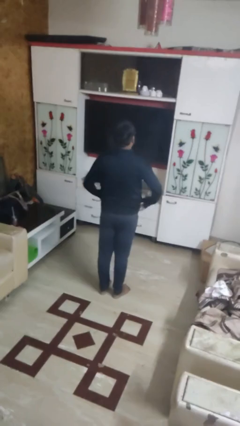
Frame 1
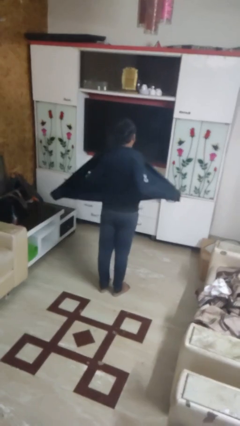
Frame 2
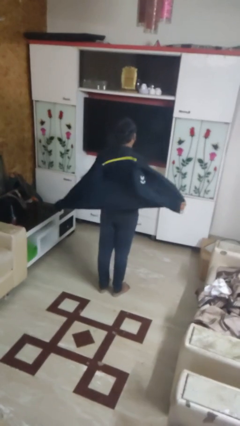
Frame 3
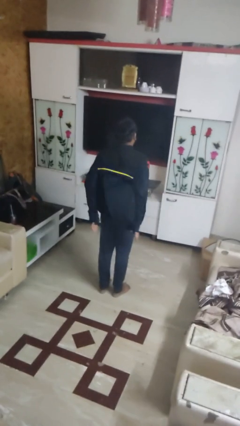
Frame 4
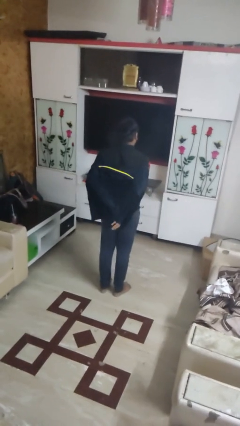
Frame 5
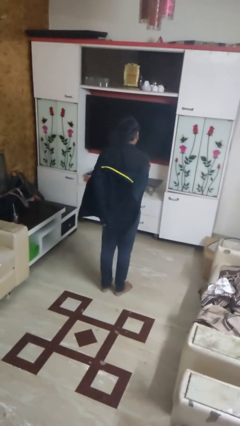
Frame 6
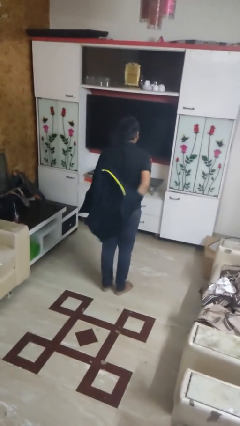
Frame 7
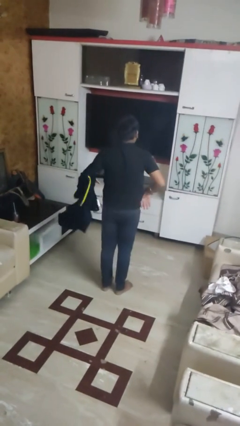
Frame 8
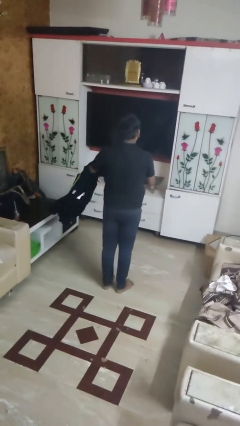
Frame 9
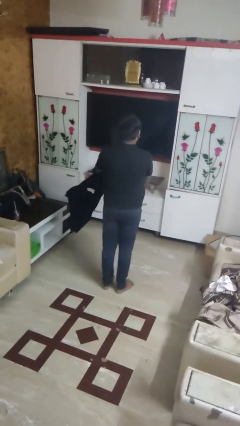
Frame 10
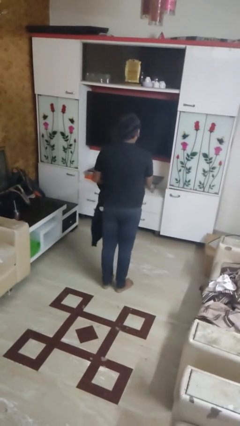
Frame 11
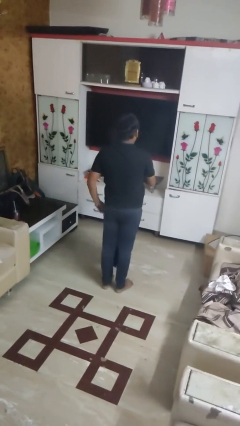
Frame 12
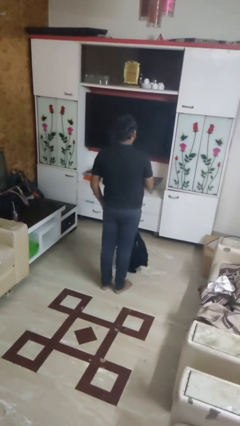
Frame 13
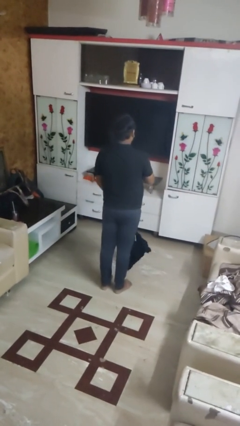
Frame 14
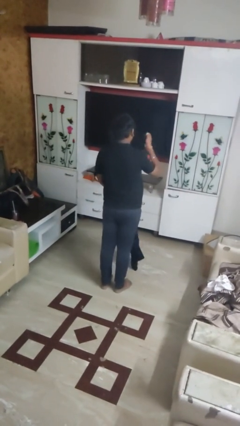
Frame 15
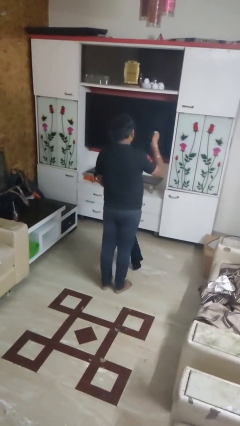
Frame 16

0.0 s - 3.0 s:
person takes off jacket

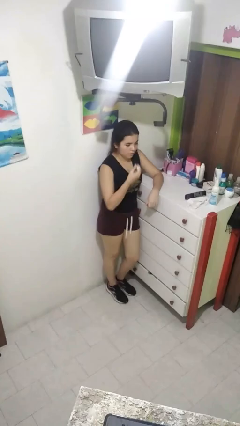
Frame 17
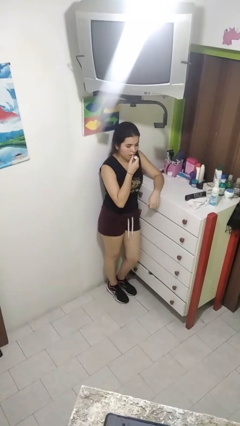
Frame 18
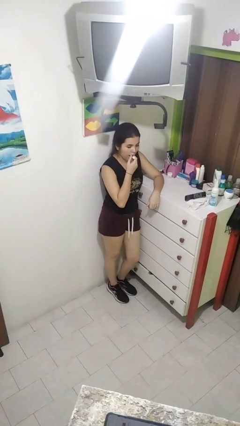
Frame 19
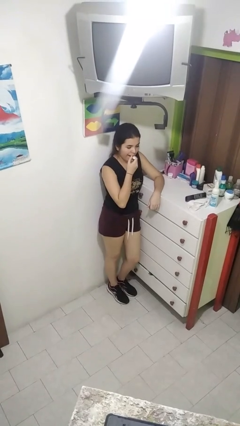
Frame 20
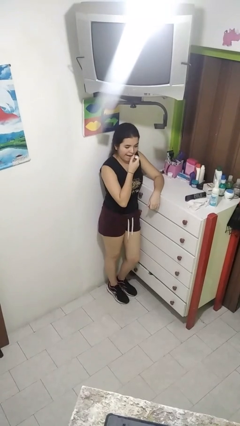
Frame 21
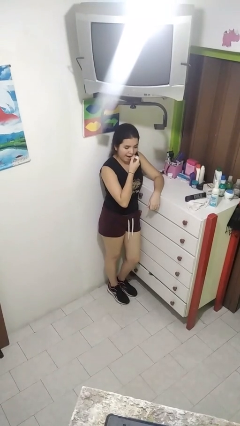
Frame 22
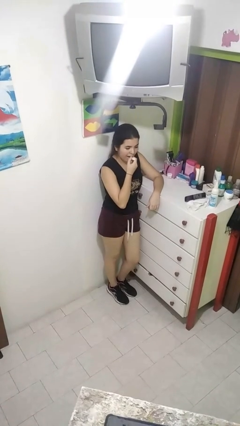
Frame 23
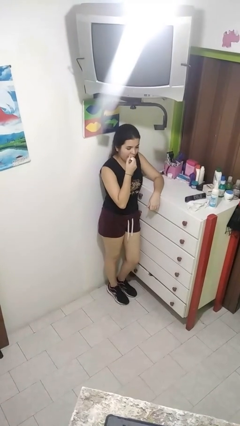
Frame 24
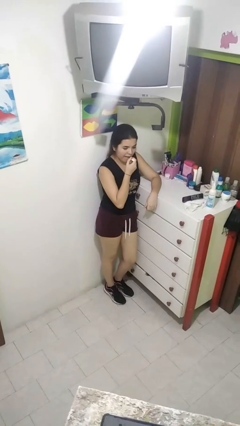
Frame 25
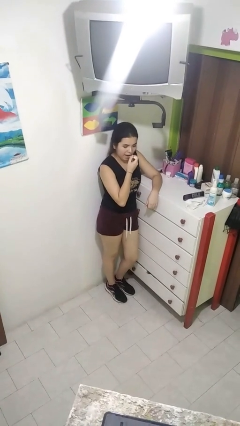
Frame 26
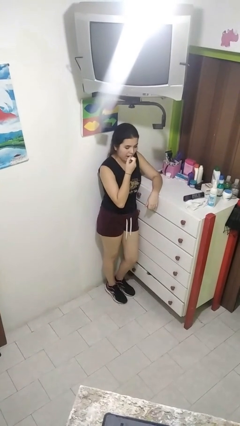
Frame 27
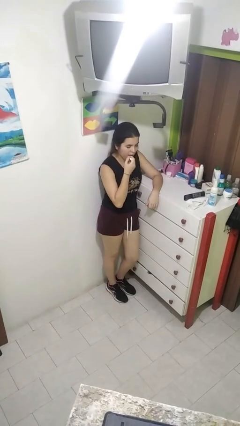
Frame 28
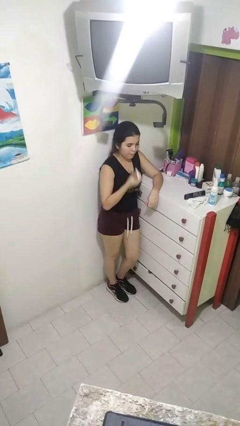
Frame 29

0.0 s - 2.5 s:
person applies lip makeup

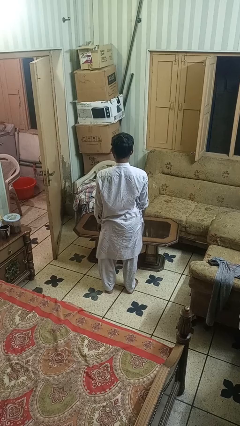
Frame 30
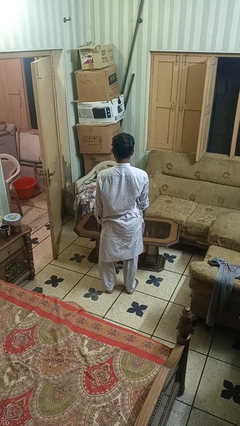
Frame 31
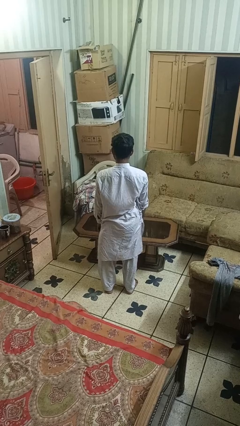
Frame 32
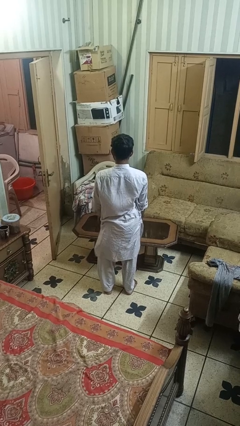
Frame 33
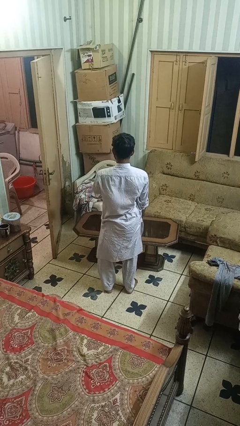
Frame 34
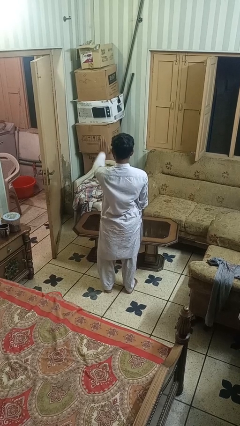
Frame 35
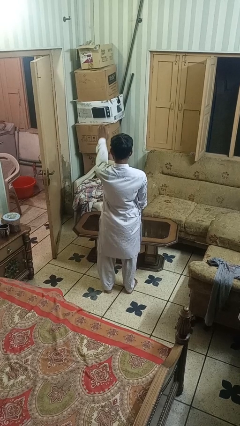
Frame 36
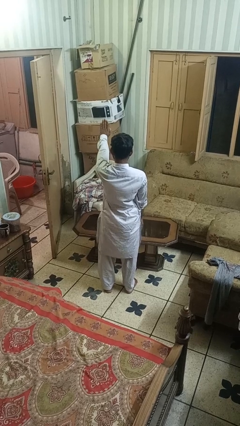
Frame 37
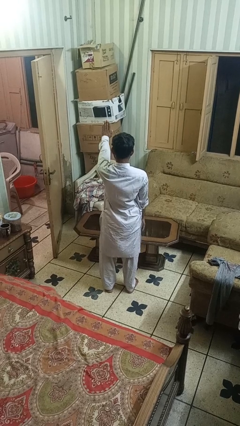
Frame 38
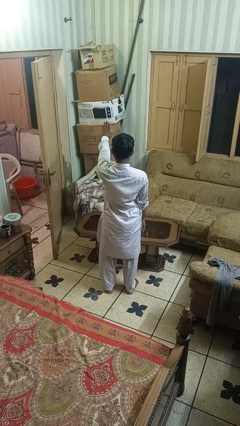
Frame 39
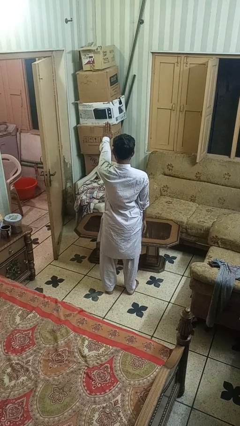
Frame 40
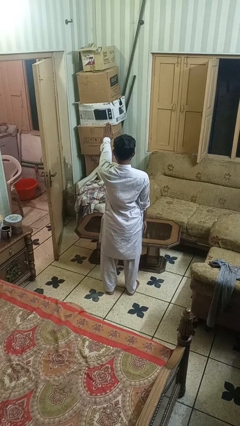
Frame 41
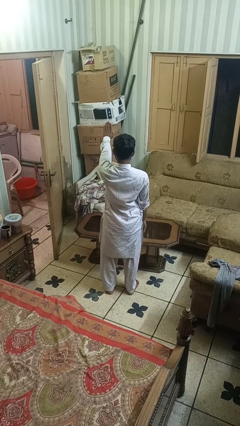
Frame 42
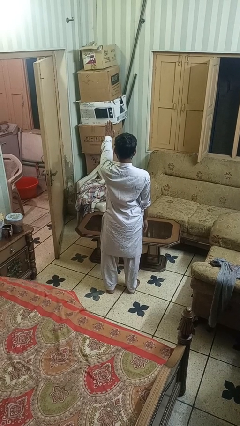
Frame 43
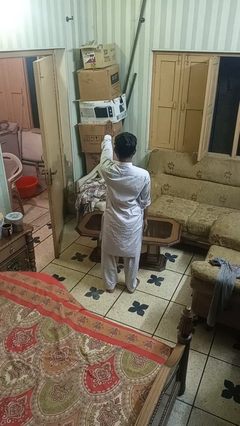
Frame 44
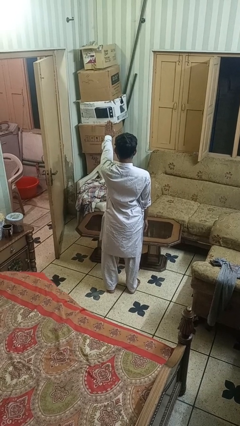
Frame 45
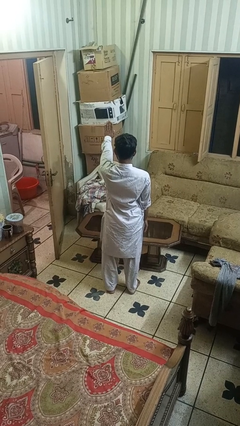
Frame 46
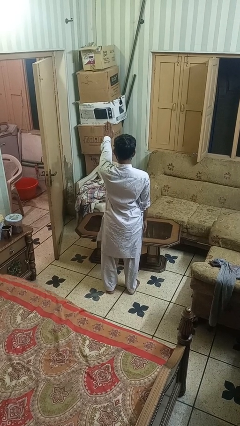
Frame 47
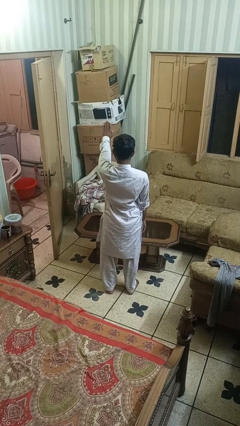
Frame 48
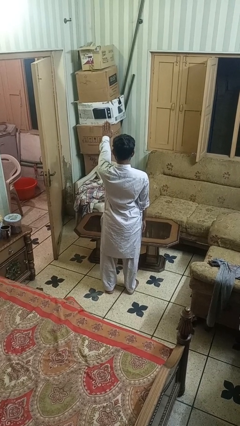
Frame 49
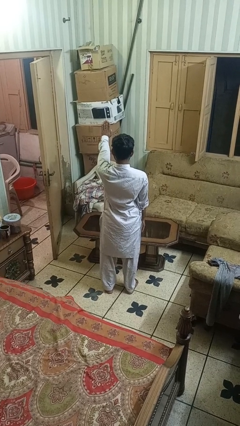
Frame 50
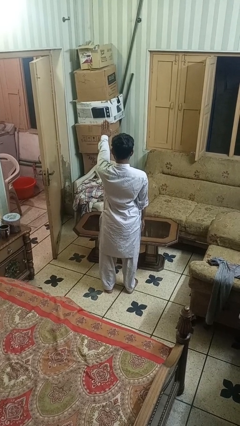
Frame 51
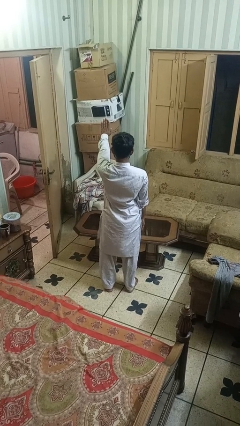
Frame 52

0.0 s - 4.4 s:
person gestures stop

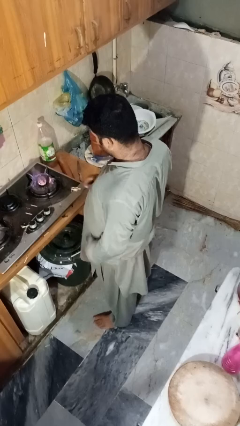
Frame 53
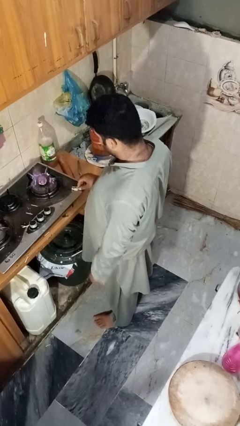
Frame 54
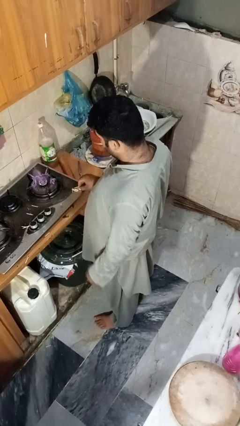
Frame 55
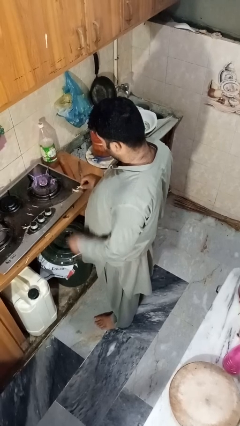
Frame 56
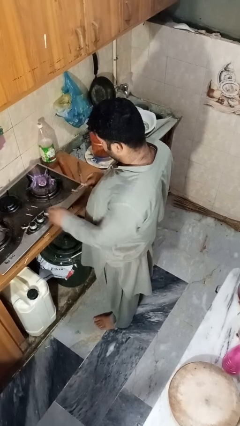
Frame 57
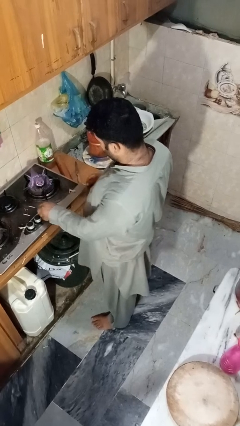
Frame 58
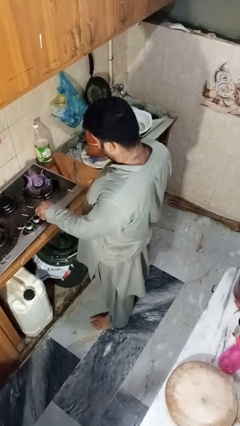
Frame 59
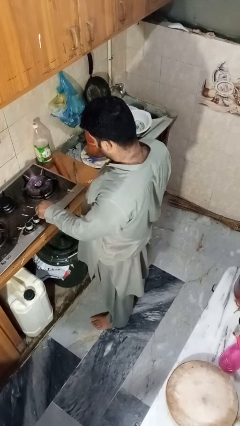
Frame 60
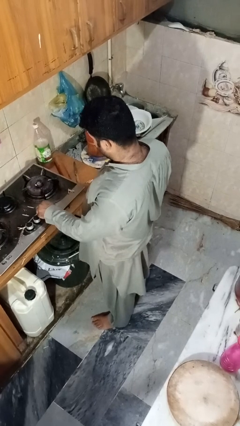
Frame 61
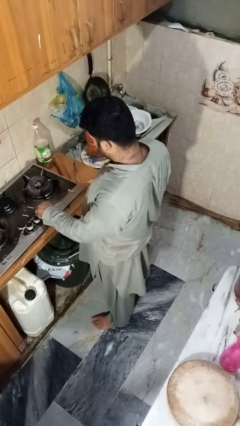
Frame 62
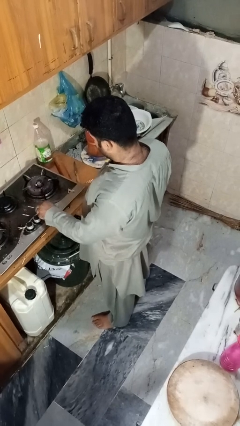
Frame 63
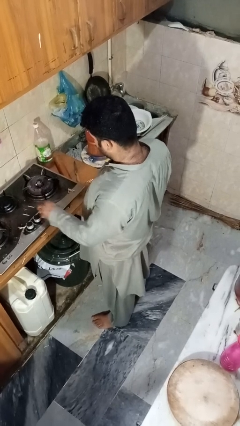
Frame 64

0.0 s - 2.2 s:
person turns off stovetop

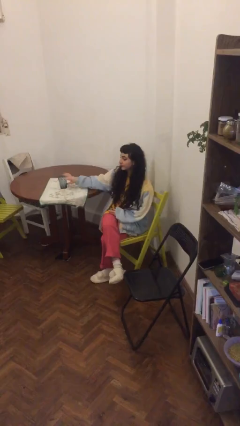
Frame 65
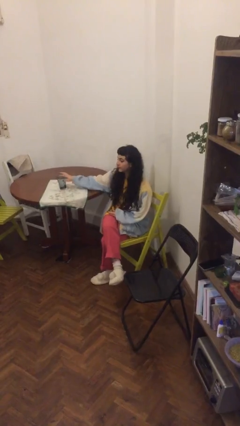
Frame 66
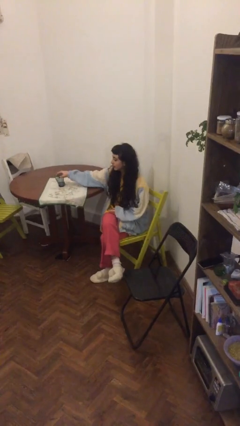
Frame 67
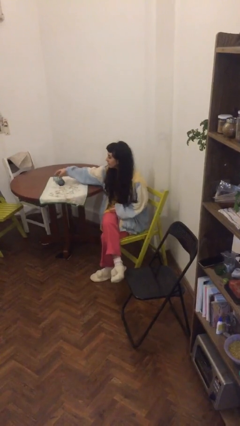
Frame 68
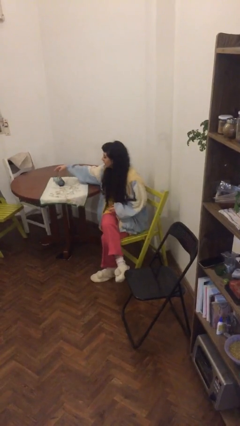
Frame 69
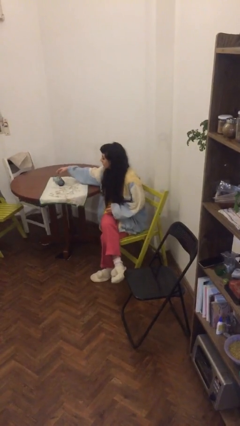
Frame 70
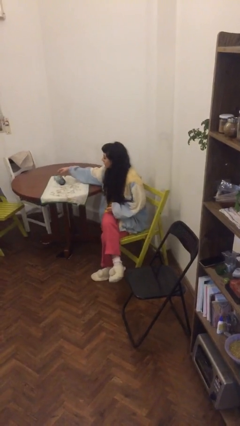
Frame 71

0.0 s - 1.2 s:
person knocks over glass

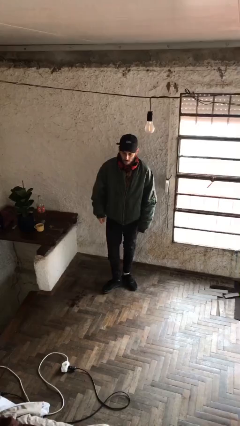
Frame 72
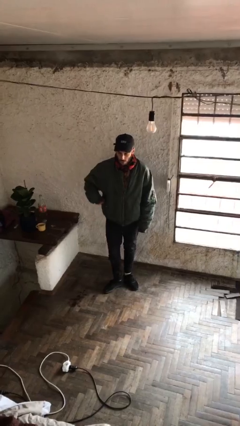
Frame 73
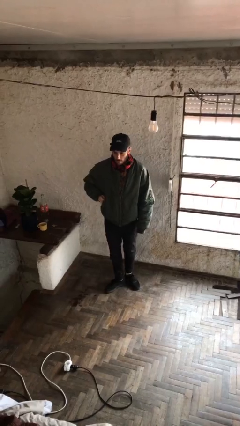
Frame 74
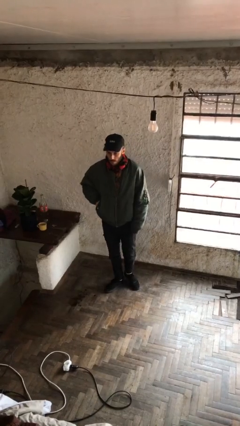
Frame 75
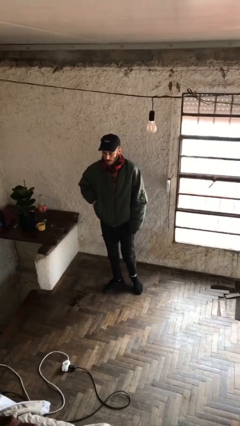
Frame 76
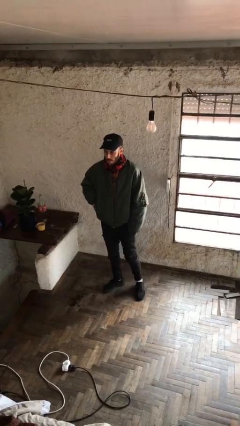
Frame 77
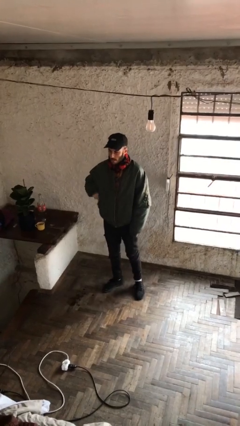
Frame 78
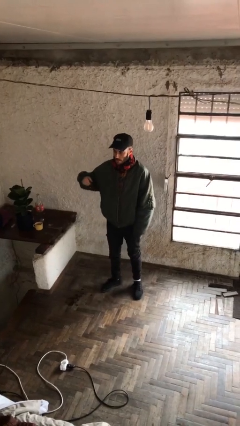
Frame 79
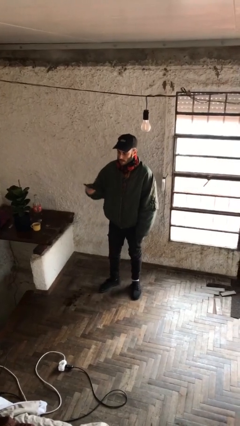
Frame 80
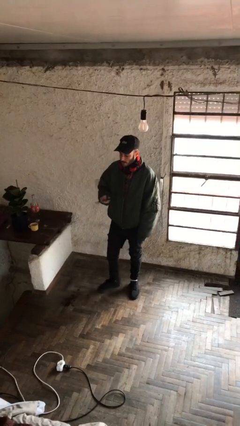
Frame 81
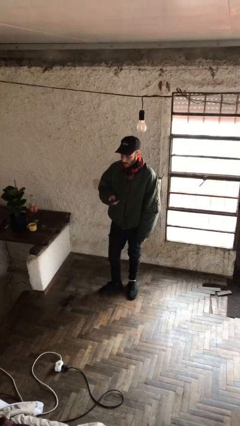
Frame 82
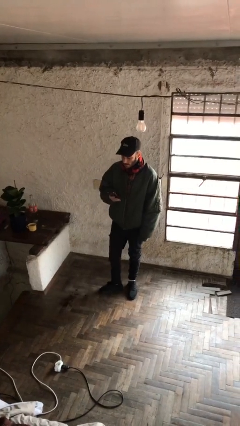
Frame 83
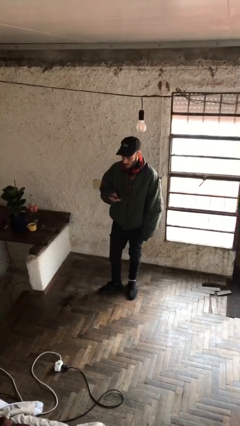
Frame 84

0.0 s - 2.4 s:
person takes phone from pocket

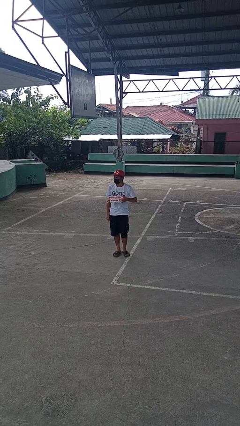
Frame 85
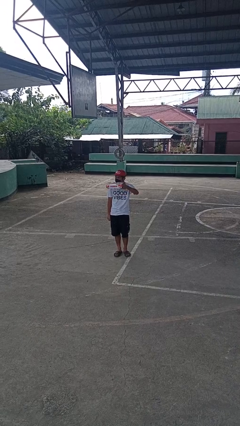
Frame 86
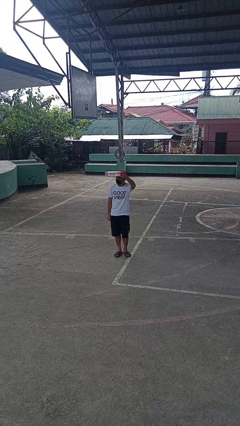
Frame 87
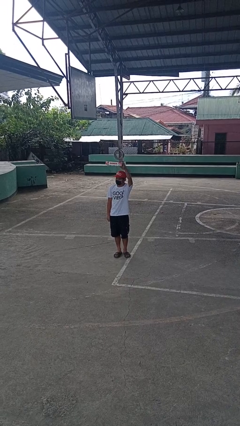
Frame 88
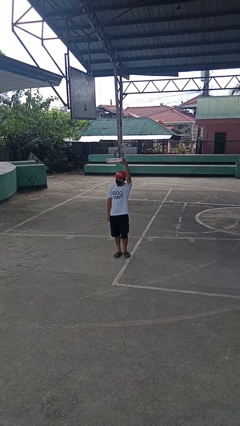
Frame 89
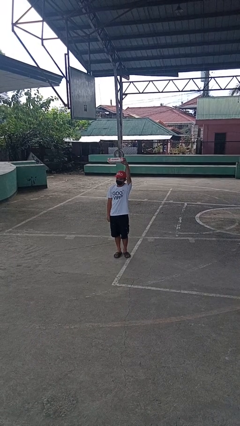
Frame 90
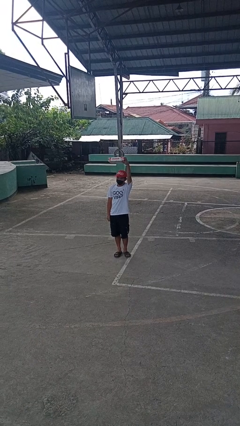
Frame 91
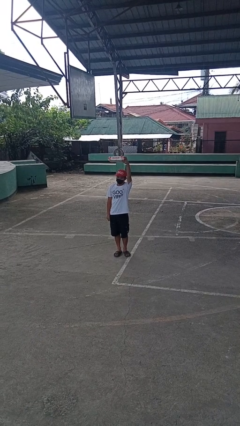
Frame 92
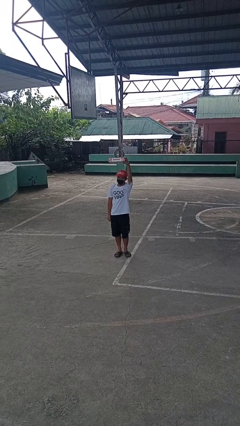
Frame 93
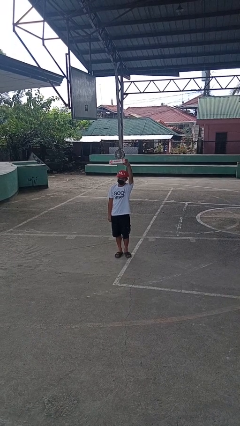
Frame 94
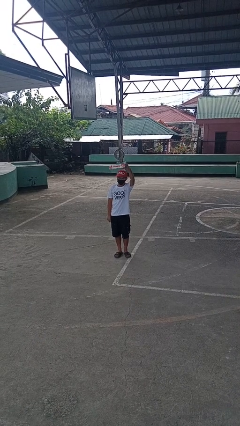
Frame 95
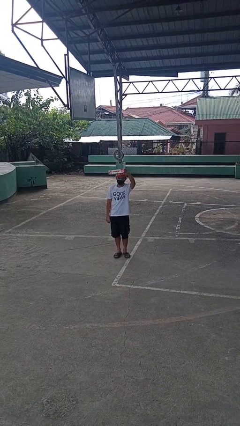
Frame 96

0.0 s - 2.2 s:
person holds object above head
